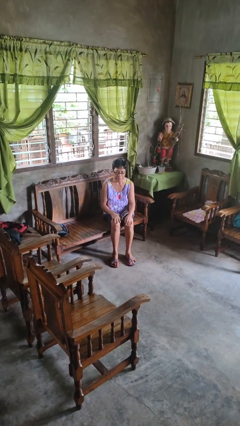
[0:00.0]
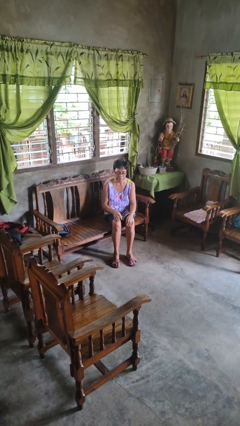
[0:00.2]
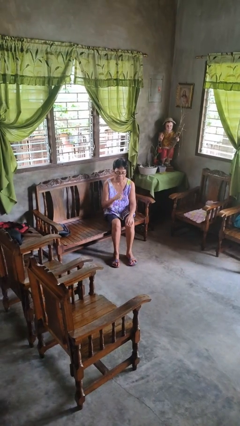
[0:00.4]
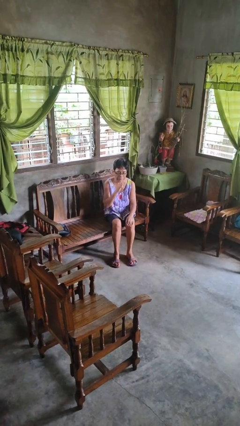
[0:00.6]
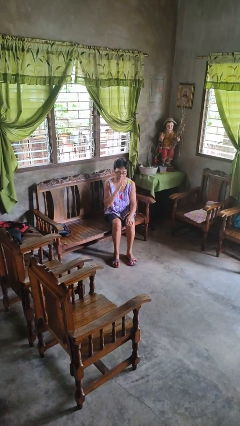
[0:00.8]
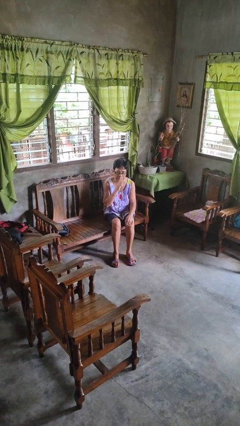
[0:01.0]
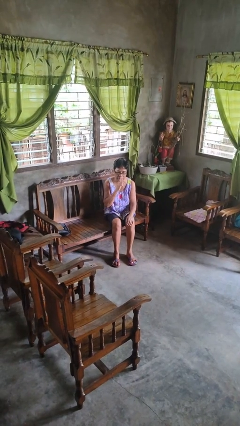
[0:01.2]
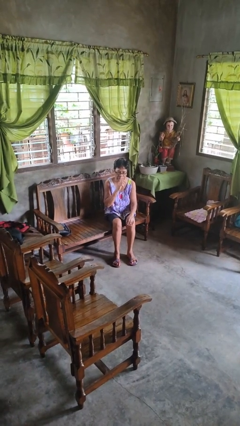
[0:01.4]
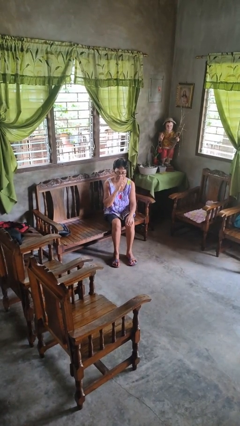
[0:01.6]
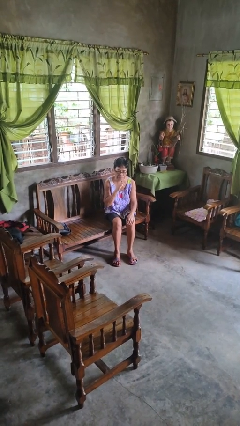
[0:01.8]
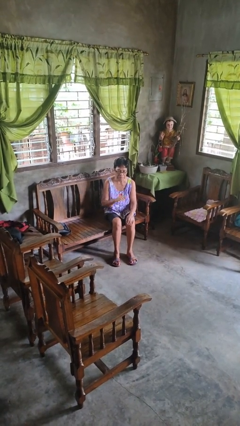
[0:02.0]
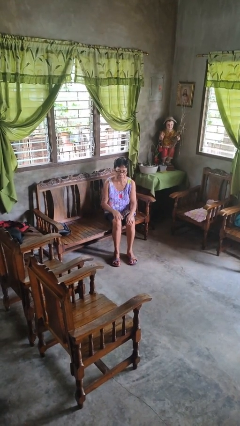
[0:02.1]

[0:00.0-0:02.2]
person gestures be quiet

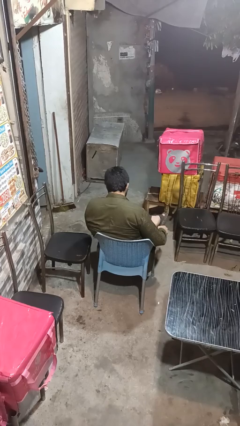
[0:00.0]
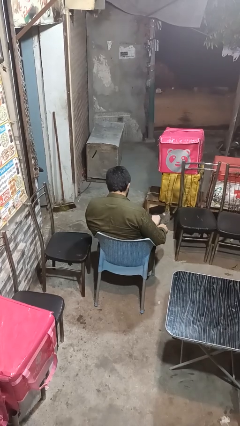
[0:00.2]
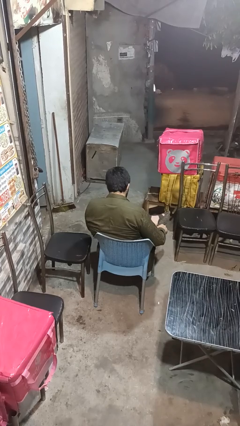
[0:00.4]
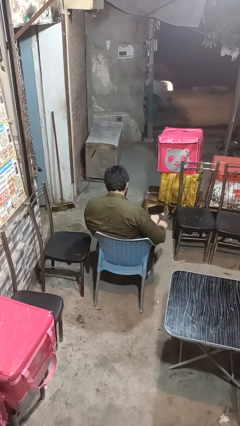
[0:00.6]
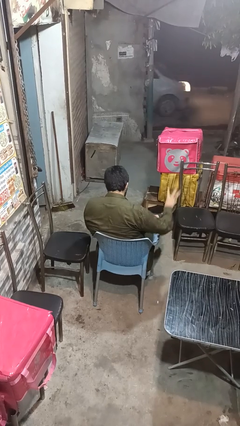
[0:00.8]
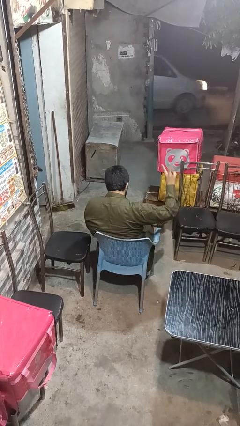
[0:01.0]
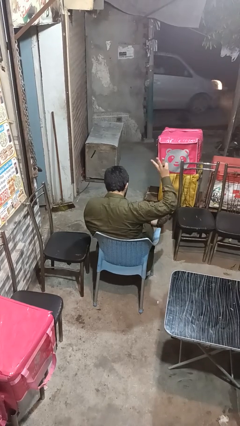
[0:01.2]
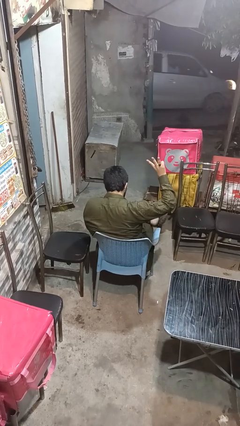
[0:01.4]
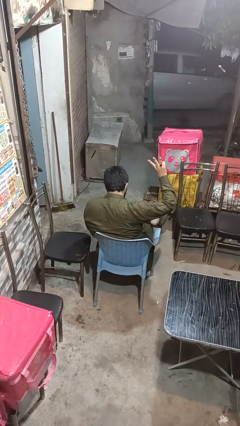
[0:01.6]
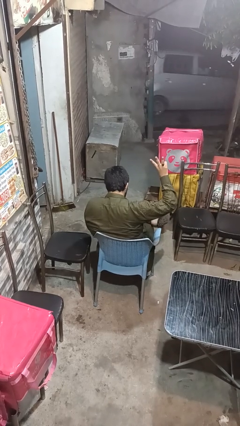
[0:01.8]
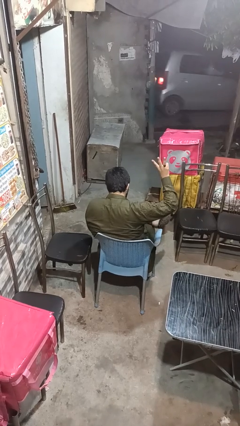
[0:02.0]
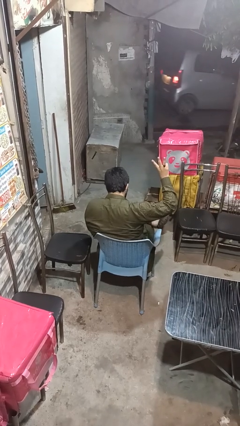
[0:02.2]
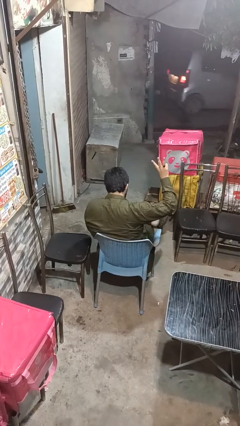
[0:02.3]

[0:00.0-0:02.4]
person gestures number three

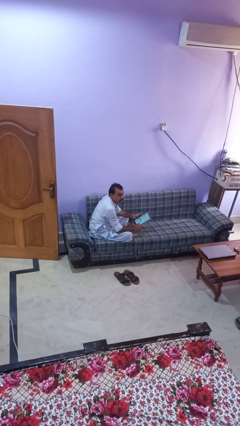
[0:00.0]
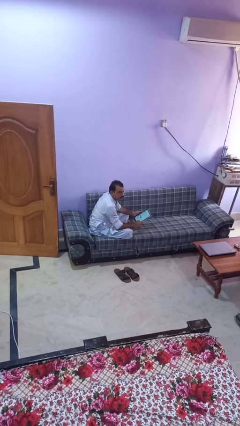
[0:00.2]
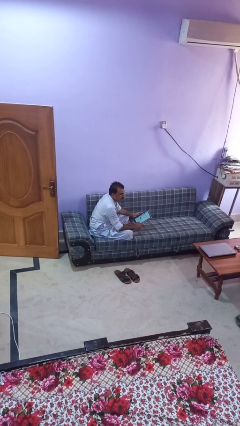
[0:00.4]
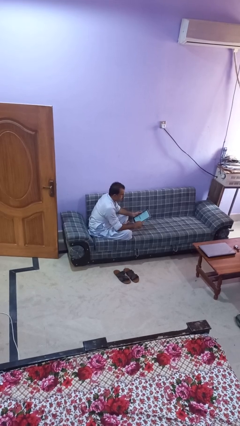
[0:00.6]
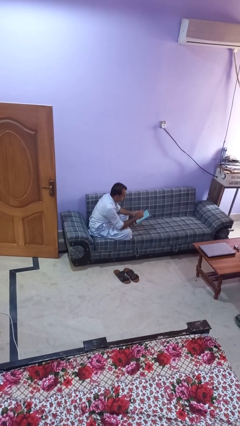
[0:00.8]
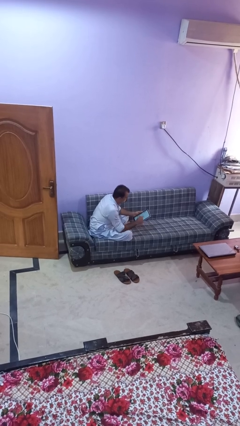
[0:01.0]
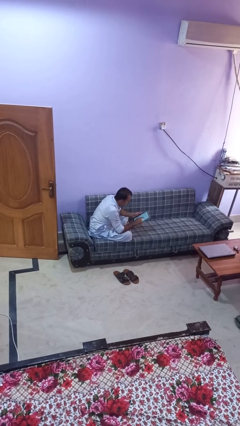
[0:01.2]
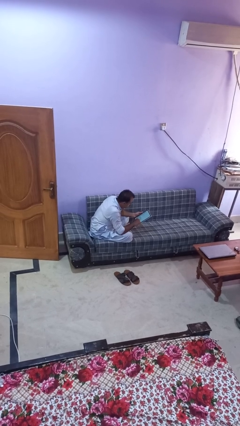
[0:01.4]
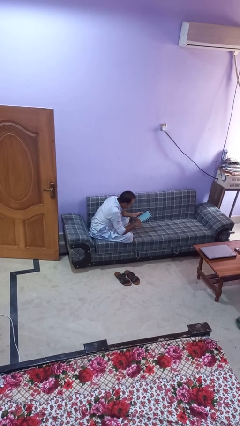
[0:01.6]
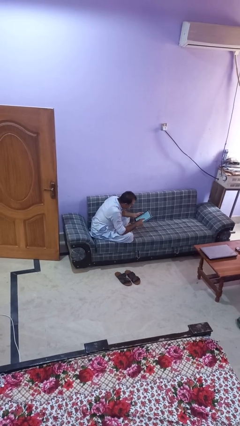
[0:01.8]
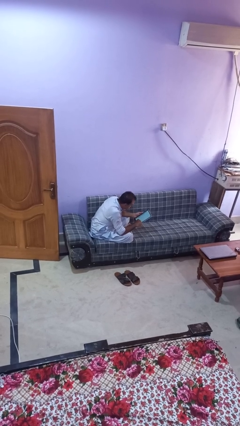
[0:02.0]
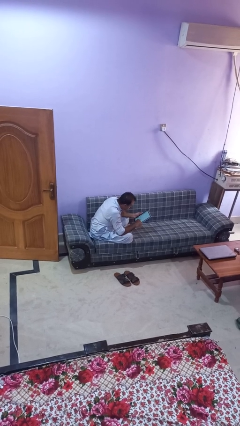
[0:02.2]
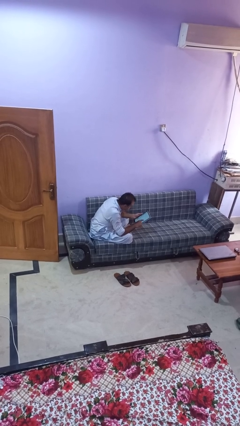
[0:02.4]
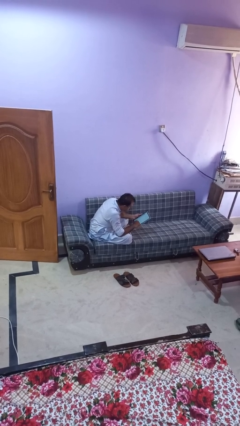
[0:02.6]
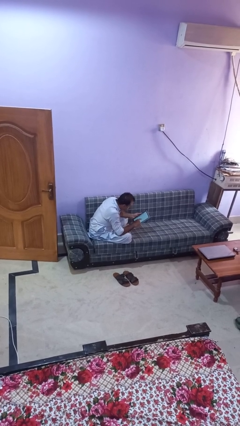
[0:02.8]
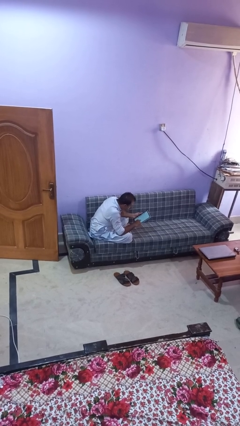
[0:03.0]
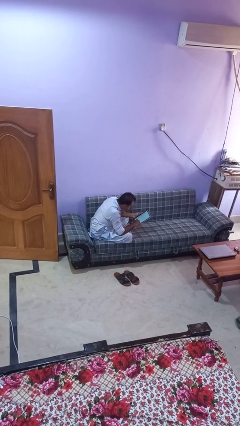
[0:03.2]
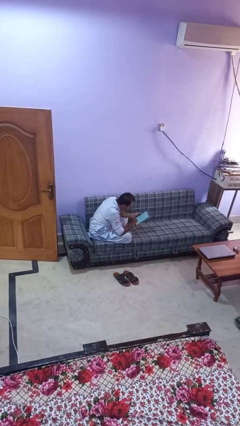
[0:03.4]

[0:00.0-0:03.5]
person interacts with tablet

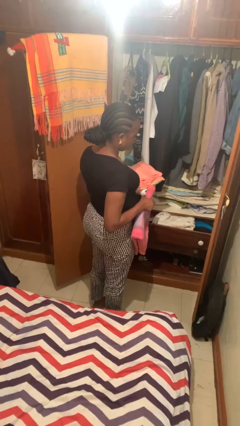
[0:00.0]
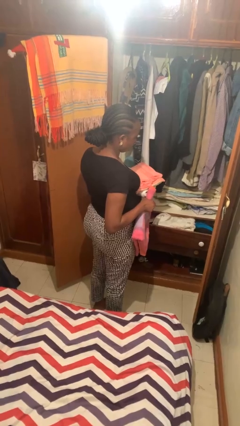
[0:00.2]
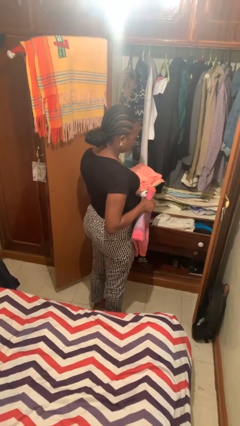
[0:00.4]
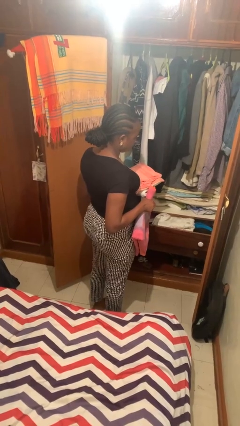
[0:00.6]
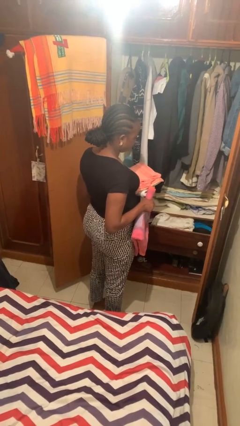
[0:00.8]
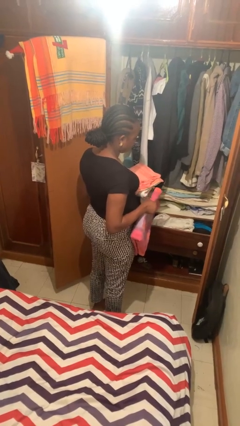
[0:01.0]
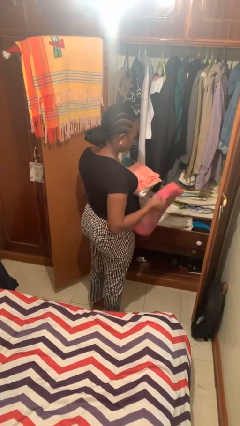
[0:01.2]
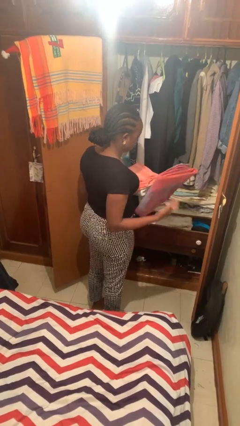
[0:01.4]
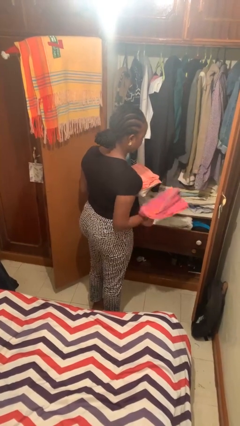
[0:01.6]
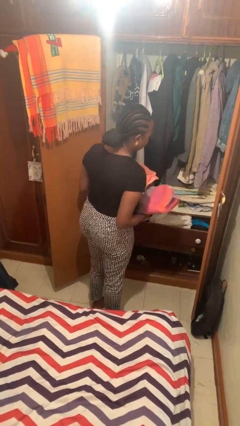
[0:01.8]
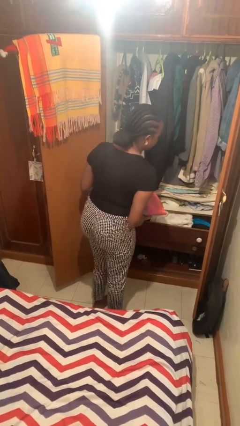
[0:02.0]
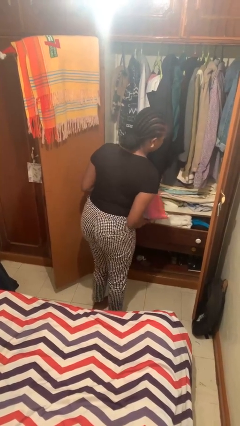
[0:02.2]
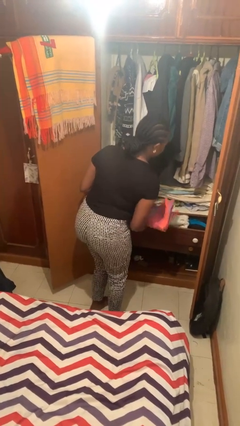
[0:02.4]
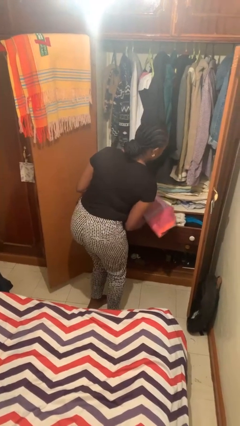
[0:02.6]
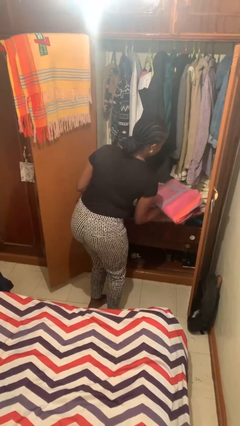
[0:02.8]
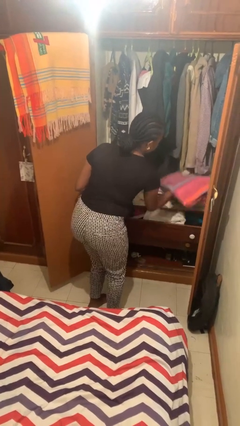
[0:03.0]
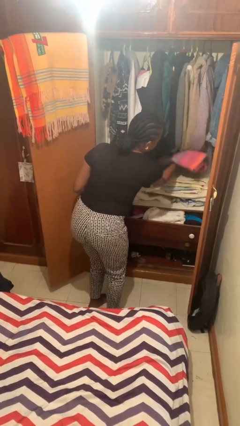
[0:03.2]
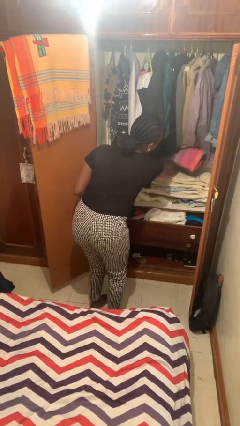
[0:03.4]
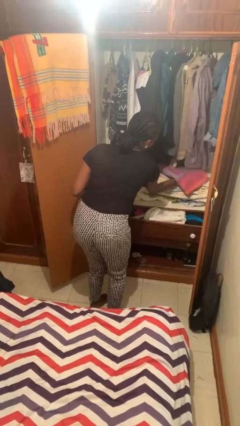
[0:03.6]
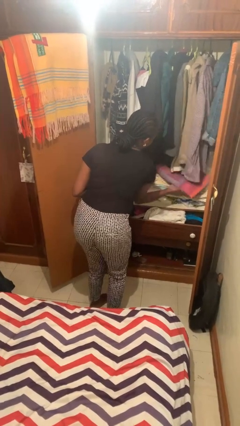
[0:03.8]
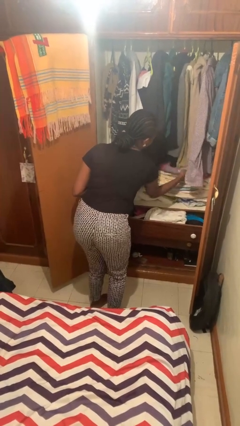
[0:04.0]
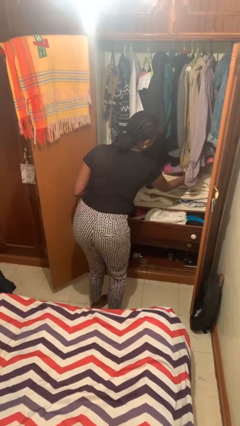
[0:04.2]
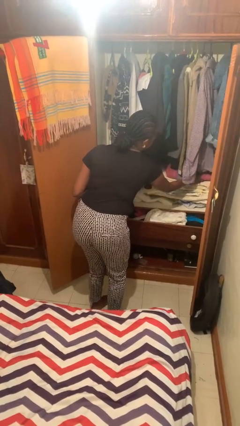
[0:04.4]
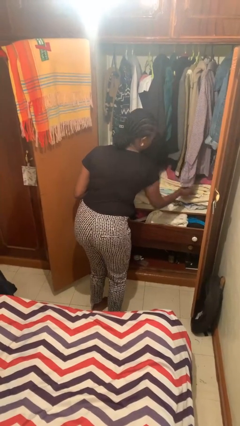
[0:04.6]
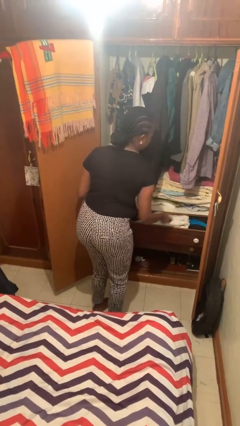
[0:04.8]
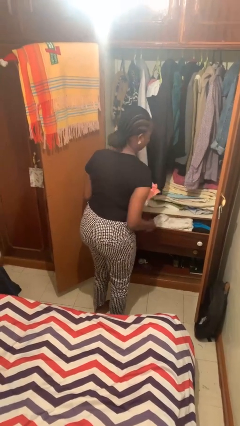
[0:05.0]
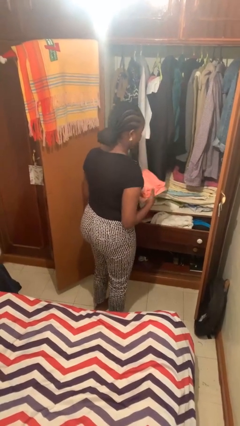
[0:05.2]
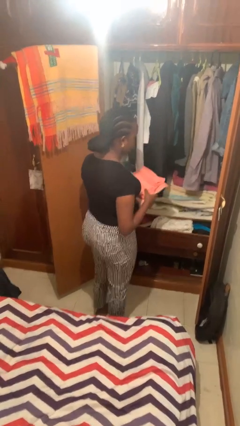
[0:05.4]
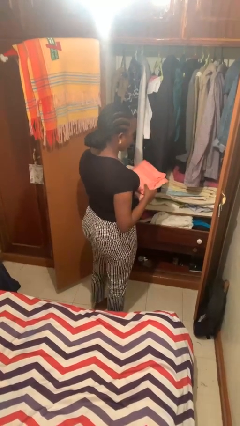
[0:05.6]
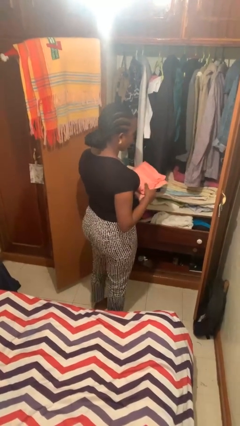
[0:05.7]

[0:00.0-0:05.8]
person puts clothes into dresser

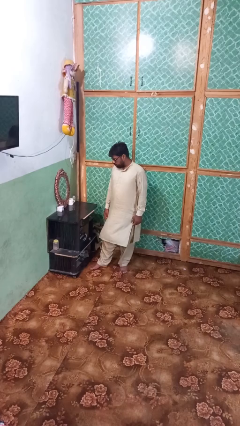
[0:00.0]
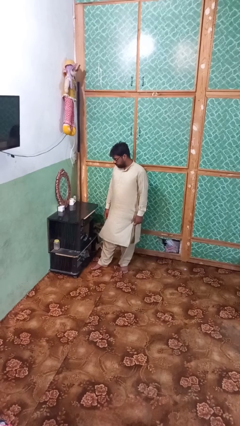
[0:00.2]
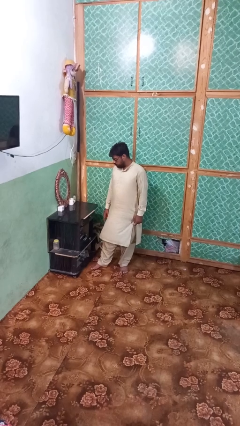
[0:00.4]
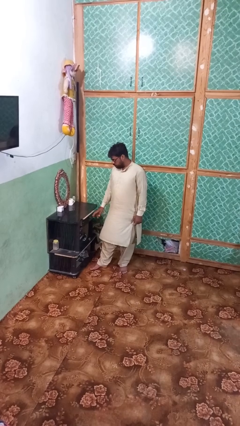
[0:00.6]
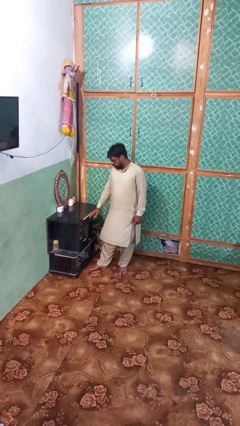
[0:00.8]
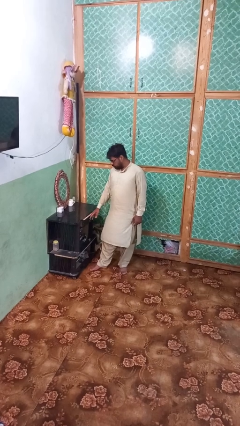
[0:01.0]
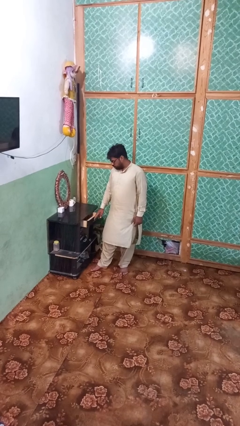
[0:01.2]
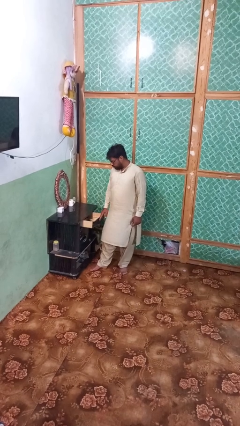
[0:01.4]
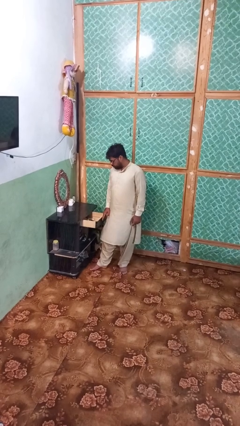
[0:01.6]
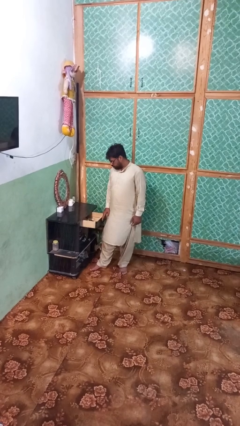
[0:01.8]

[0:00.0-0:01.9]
person opens dresser drawer

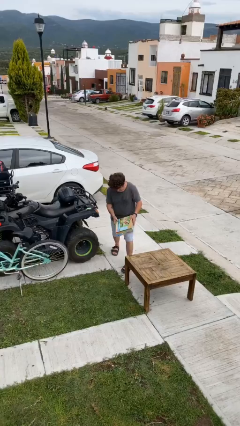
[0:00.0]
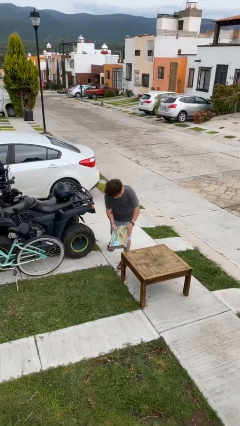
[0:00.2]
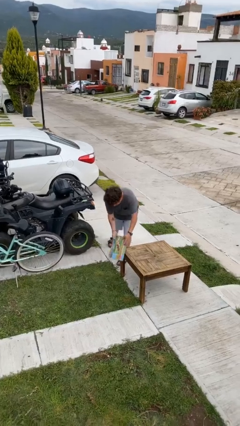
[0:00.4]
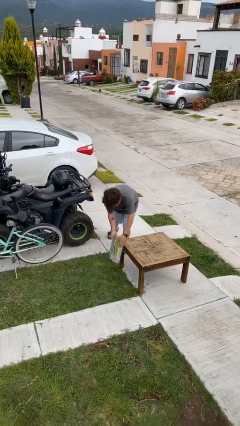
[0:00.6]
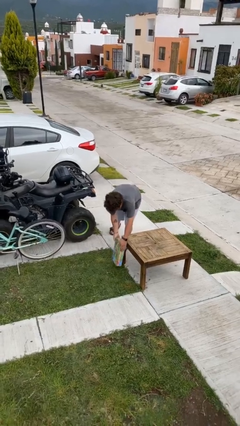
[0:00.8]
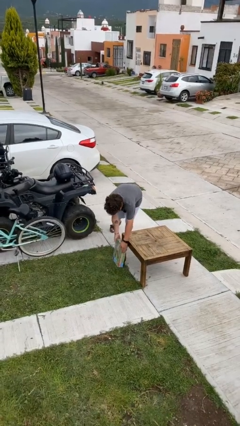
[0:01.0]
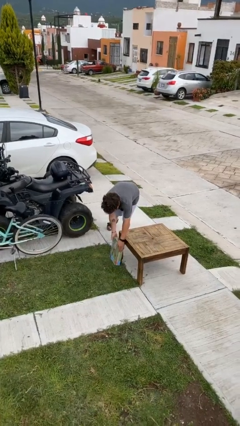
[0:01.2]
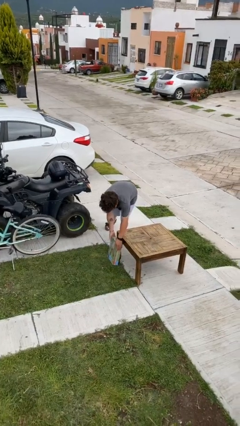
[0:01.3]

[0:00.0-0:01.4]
person puts down object on floor

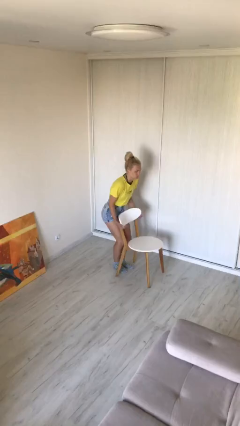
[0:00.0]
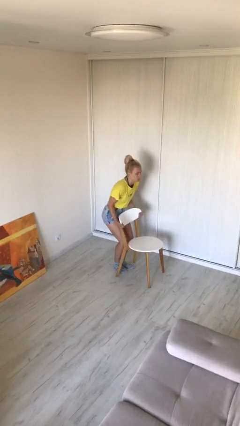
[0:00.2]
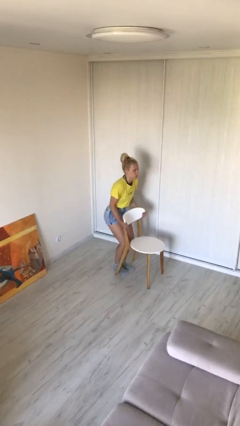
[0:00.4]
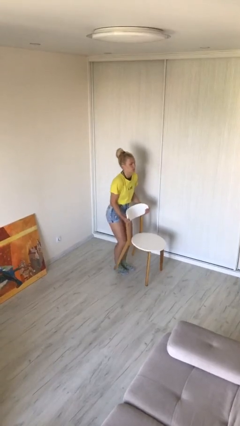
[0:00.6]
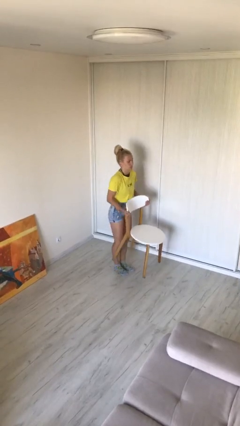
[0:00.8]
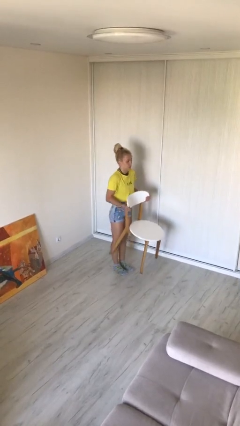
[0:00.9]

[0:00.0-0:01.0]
person picks up object from floor
